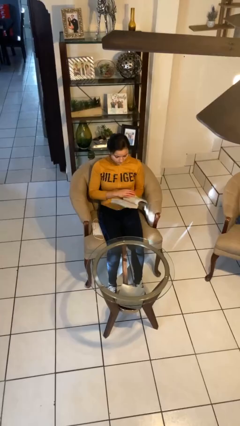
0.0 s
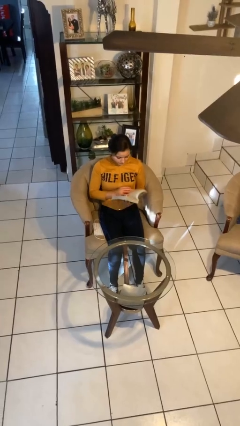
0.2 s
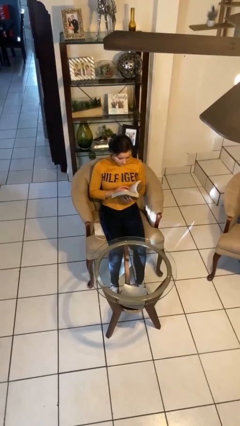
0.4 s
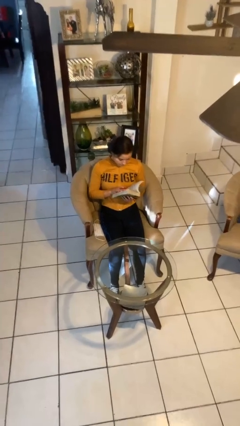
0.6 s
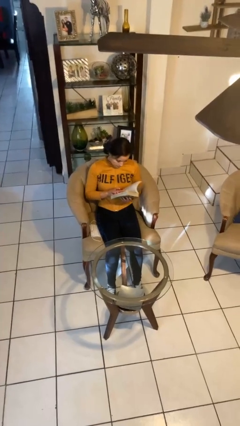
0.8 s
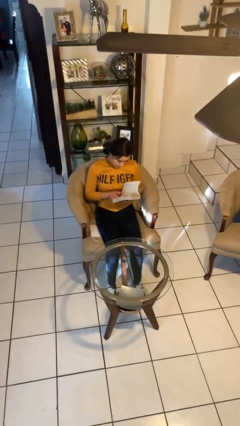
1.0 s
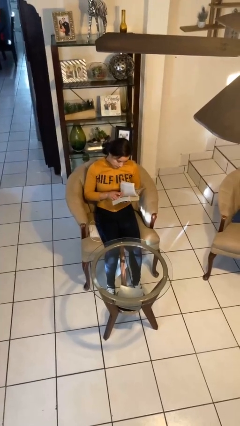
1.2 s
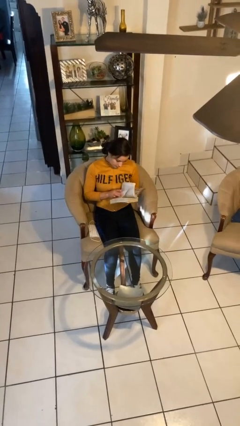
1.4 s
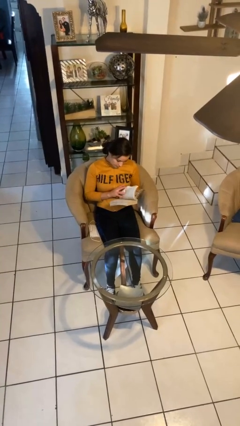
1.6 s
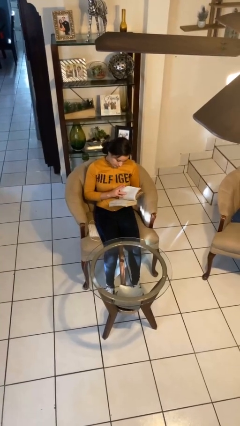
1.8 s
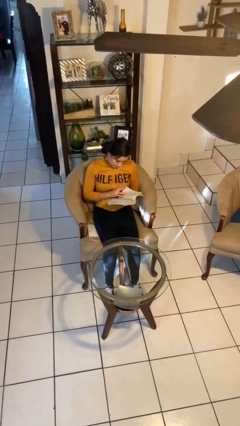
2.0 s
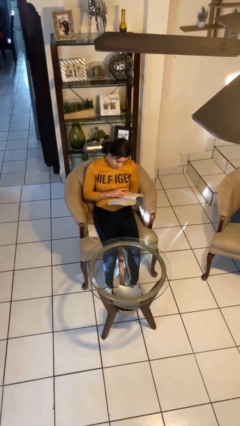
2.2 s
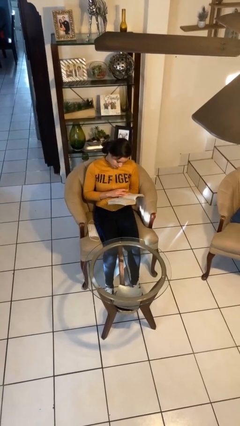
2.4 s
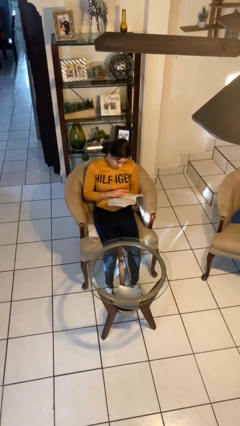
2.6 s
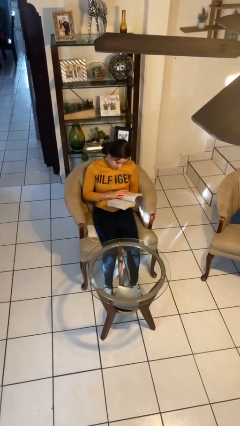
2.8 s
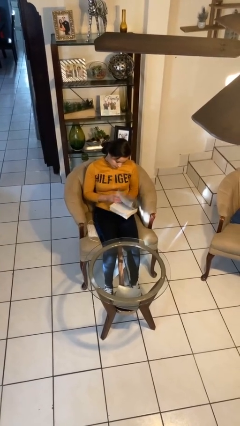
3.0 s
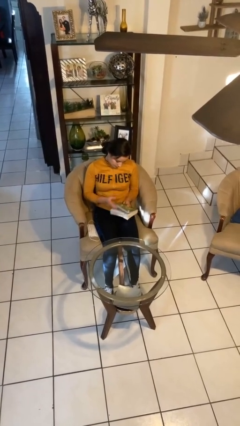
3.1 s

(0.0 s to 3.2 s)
person reads book

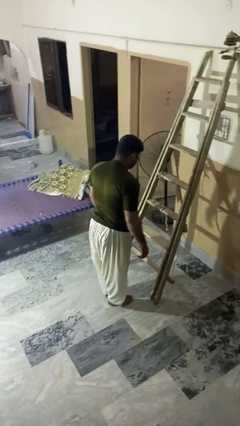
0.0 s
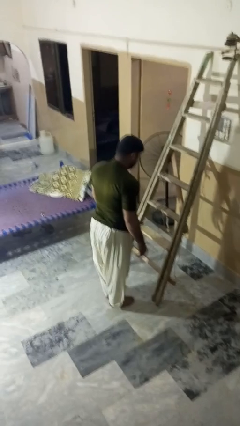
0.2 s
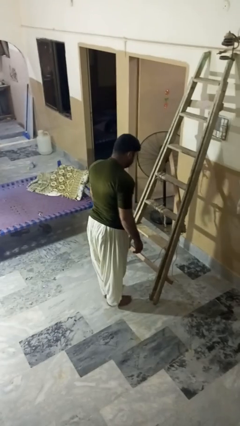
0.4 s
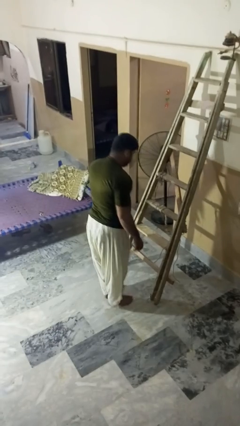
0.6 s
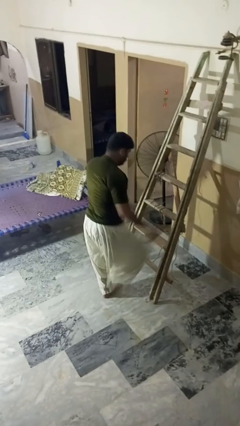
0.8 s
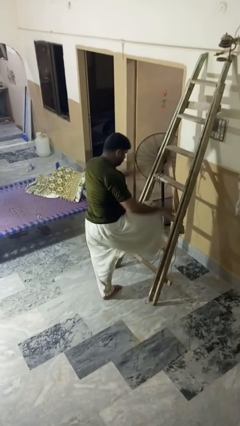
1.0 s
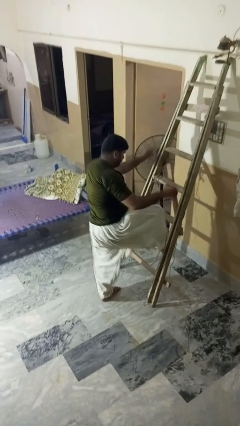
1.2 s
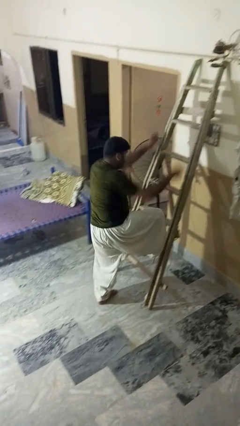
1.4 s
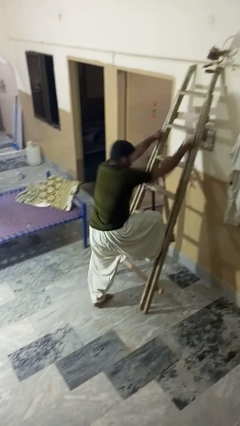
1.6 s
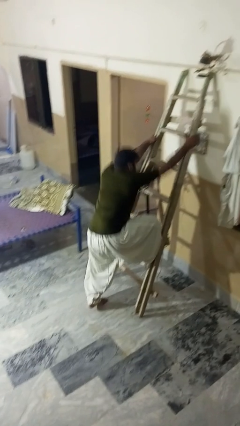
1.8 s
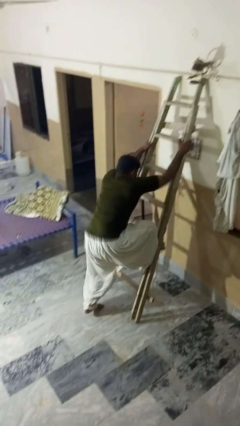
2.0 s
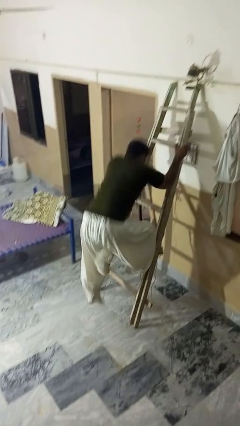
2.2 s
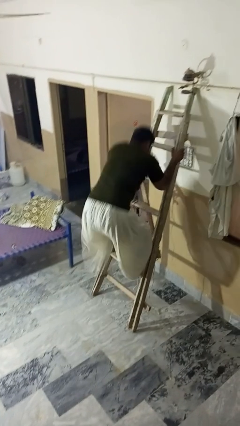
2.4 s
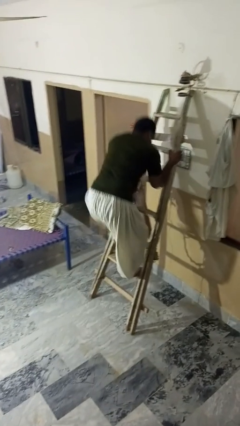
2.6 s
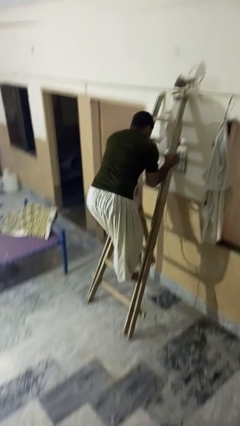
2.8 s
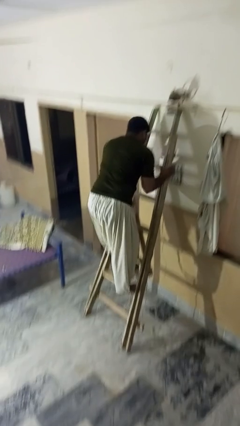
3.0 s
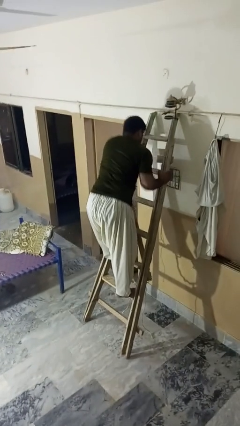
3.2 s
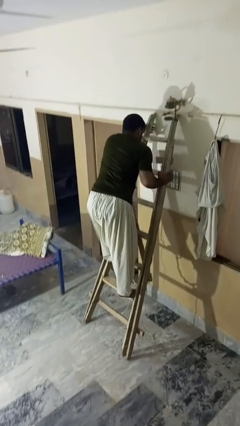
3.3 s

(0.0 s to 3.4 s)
person climbs up ladder

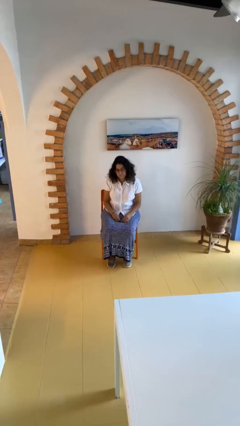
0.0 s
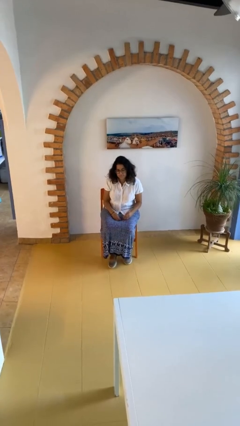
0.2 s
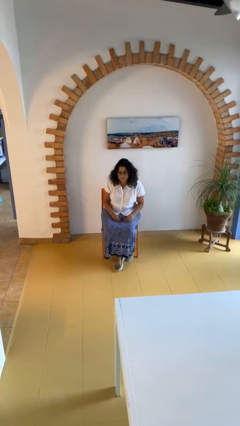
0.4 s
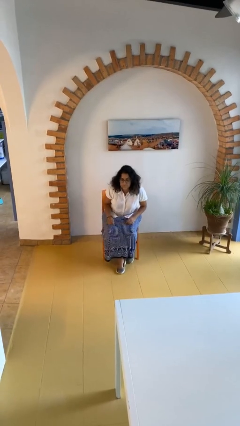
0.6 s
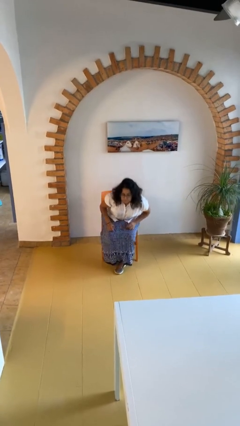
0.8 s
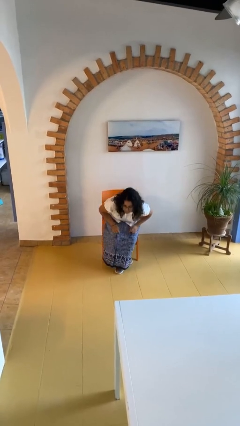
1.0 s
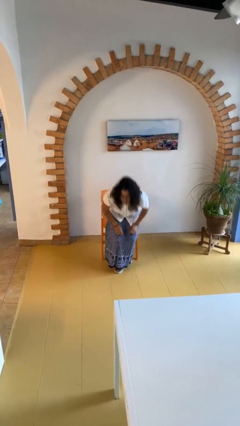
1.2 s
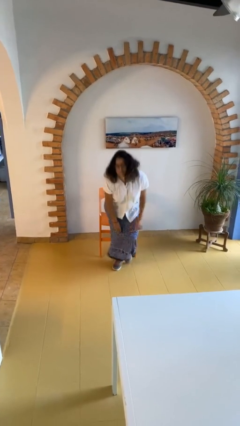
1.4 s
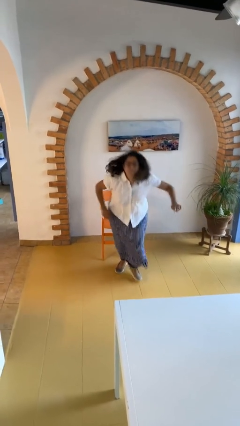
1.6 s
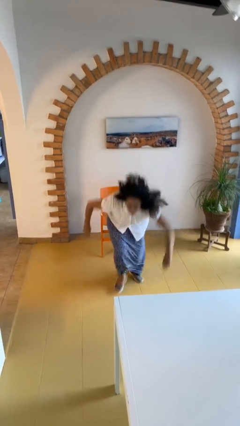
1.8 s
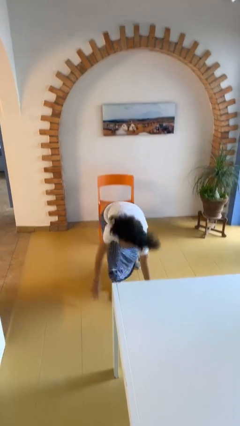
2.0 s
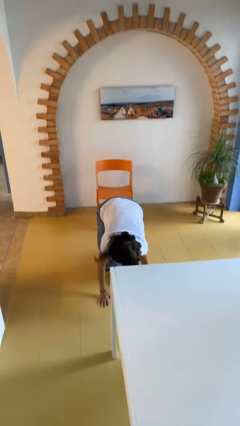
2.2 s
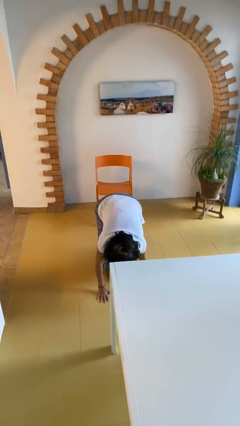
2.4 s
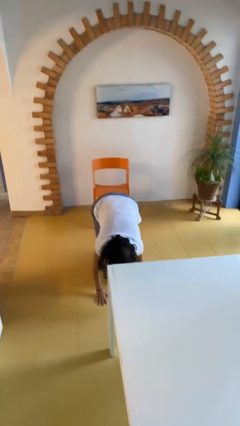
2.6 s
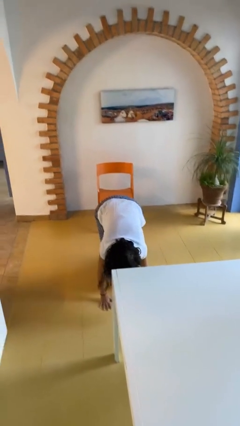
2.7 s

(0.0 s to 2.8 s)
person falls from chair

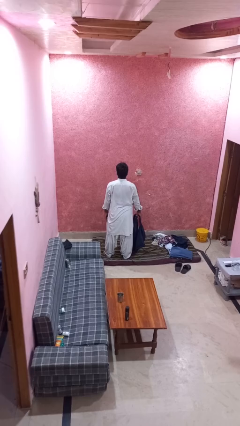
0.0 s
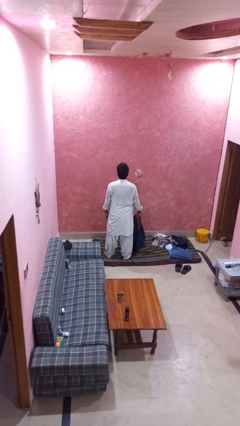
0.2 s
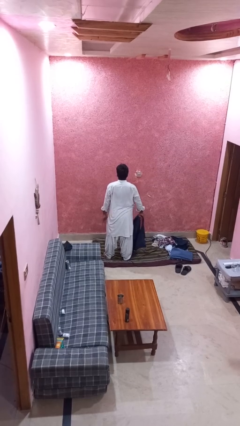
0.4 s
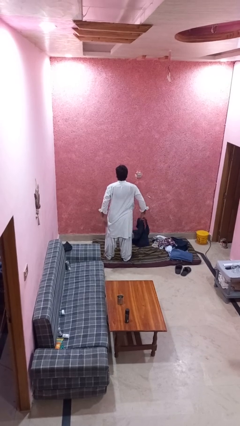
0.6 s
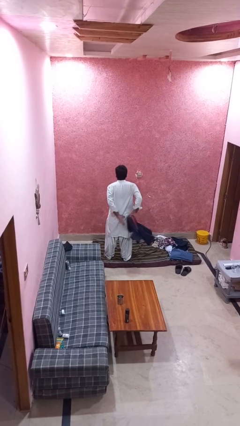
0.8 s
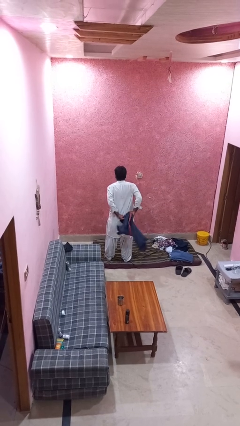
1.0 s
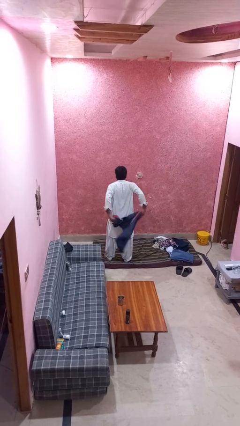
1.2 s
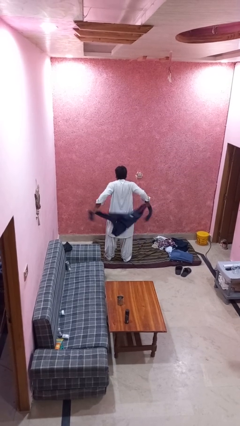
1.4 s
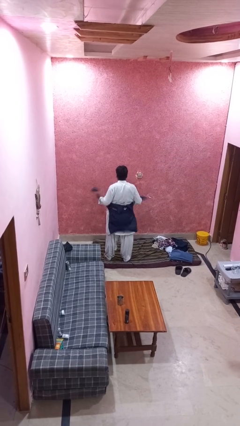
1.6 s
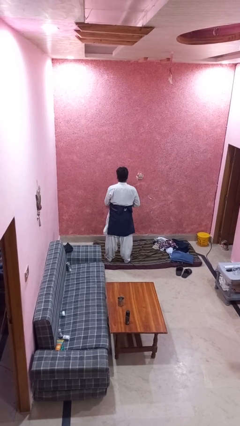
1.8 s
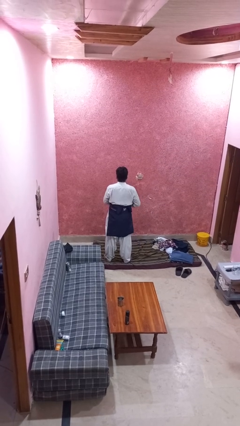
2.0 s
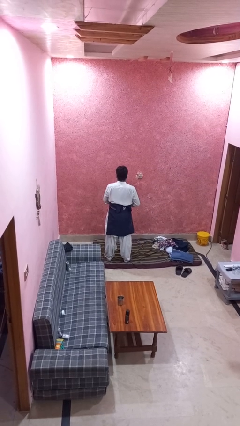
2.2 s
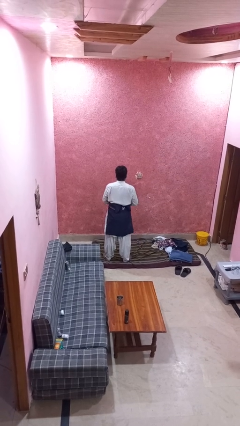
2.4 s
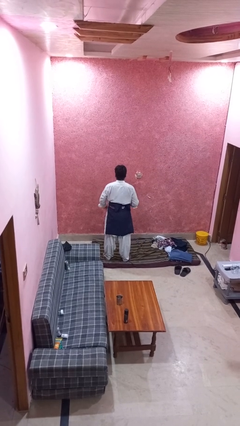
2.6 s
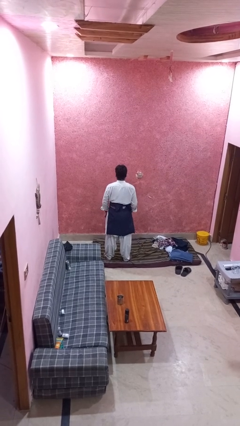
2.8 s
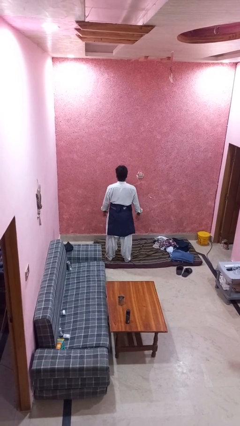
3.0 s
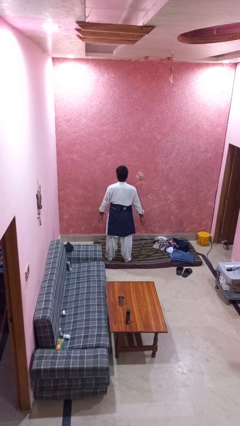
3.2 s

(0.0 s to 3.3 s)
person ties jacket around waist

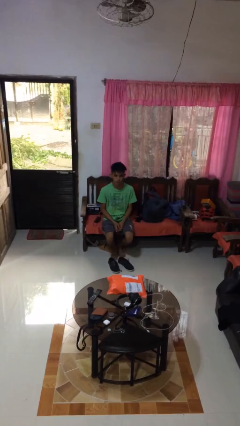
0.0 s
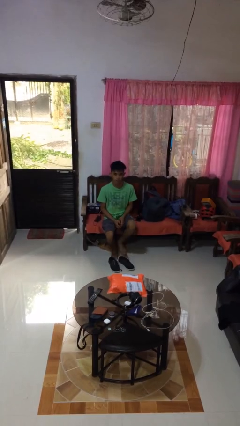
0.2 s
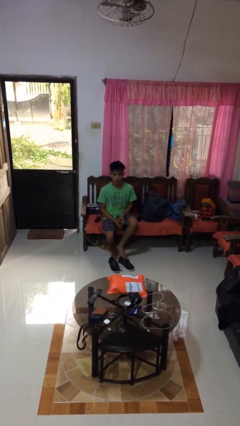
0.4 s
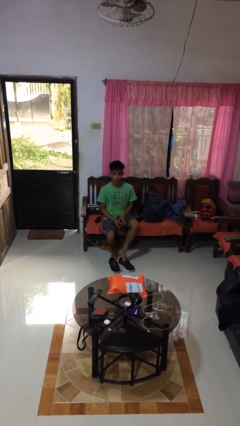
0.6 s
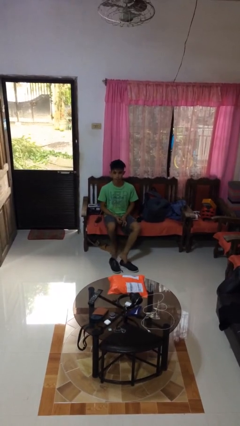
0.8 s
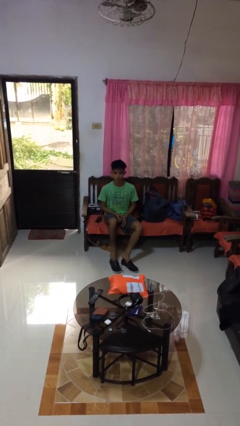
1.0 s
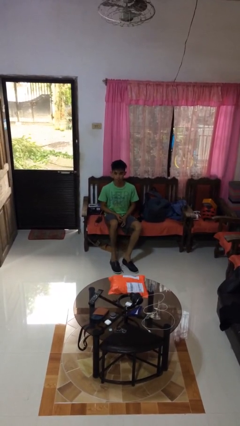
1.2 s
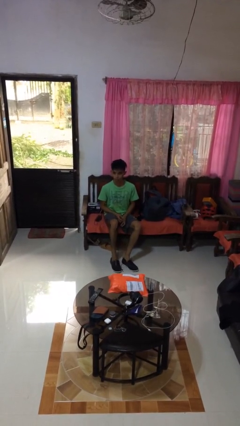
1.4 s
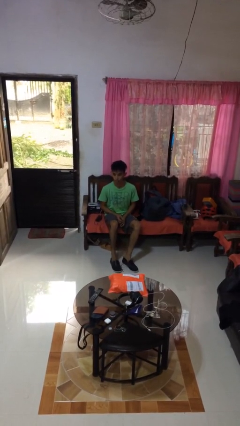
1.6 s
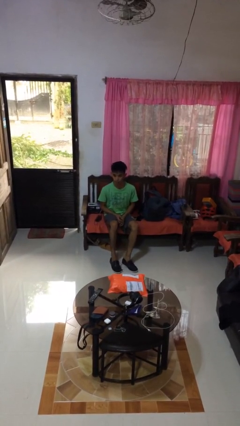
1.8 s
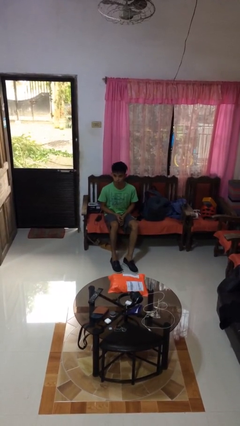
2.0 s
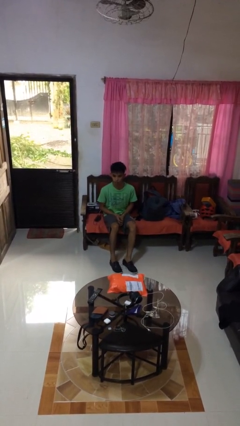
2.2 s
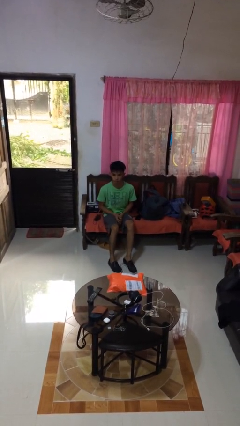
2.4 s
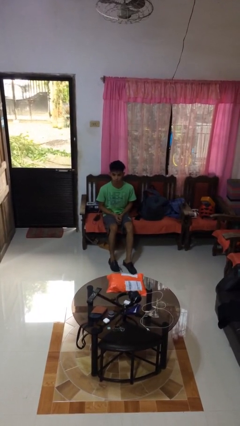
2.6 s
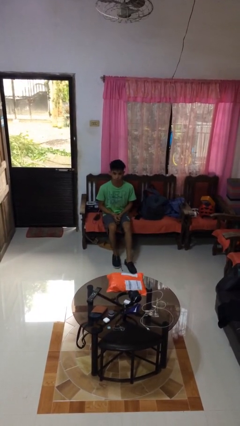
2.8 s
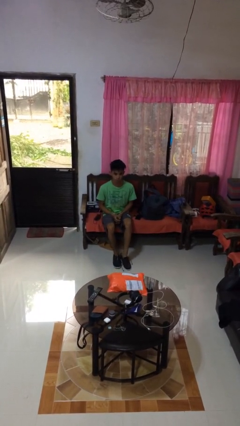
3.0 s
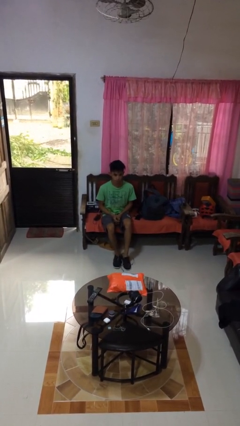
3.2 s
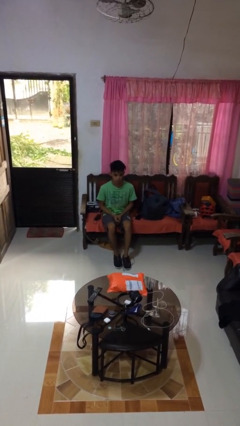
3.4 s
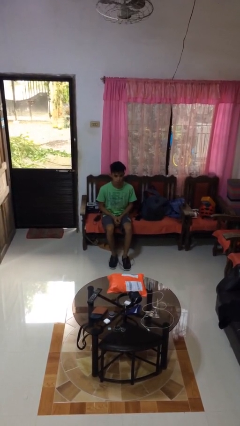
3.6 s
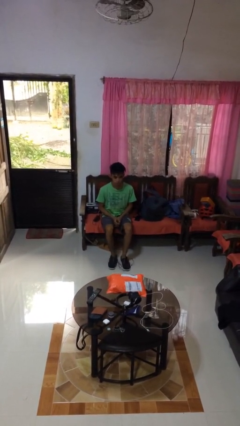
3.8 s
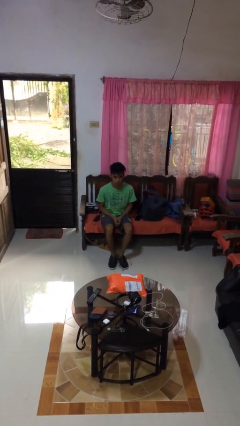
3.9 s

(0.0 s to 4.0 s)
person puts on shoes

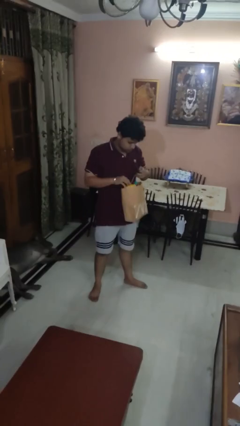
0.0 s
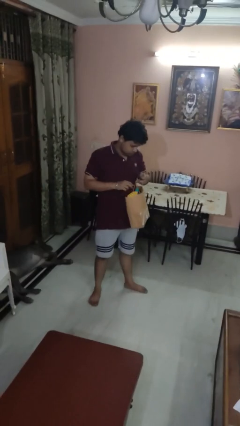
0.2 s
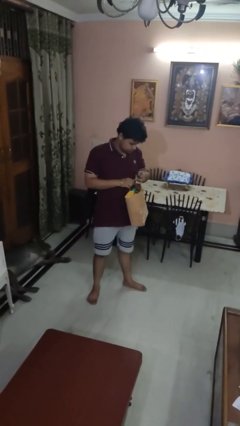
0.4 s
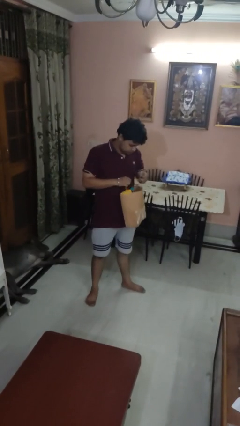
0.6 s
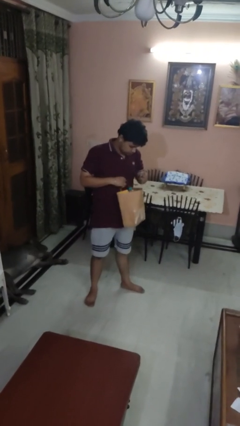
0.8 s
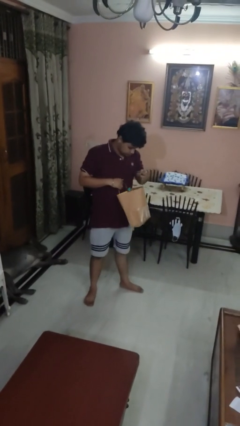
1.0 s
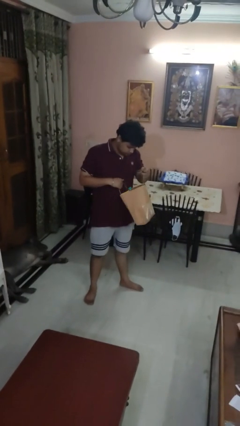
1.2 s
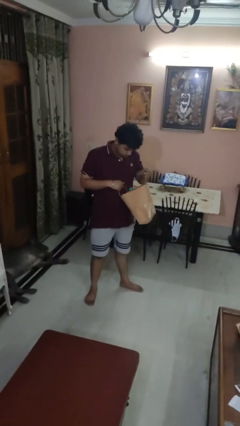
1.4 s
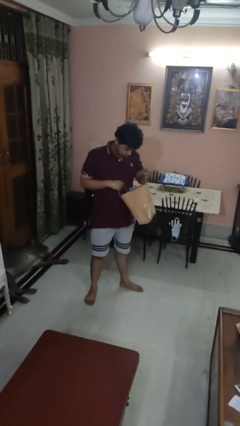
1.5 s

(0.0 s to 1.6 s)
person puts object into bag
